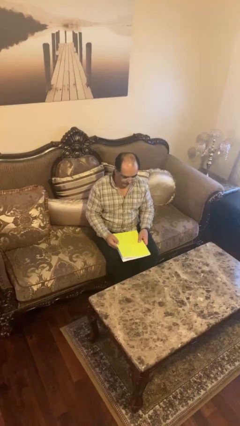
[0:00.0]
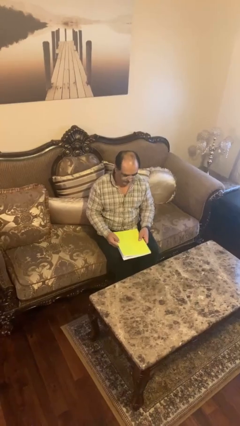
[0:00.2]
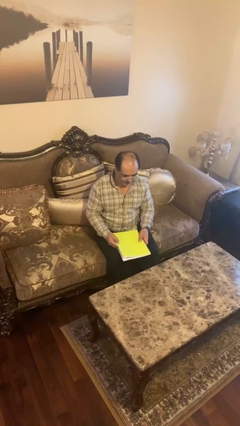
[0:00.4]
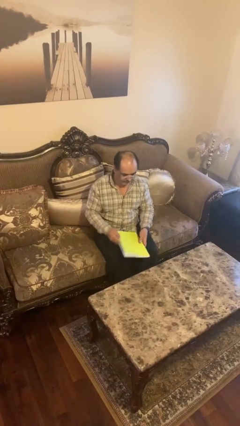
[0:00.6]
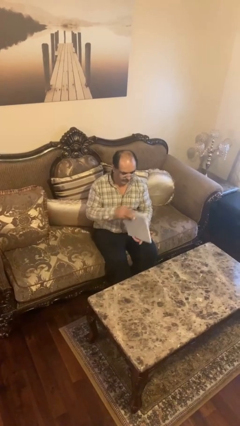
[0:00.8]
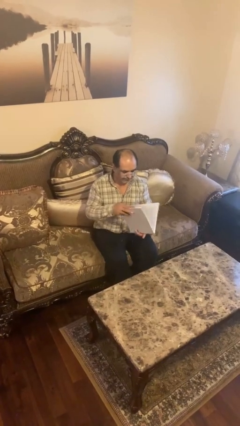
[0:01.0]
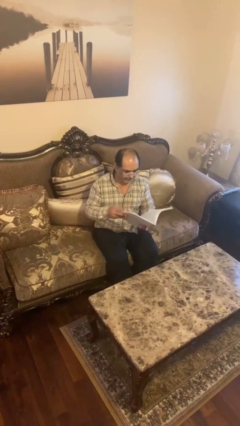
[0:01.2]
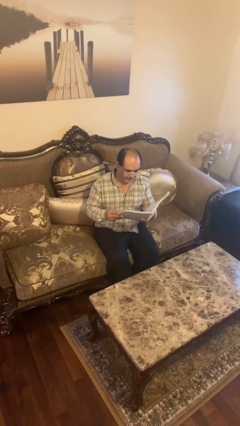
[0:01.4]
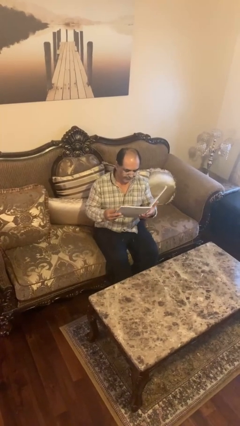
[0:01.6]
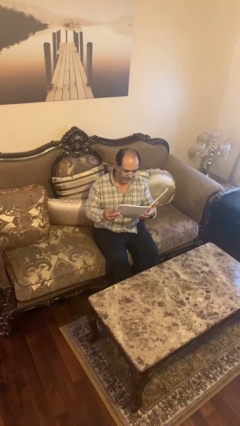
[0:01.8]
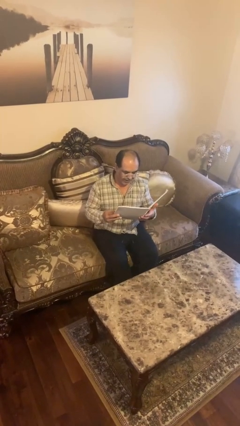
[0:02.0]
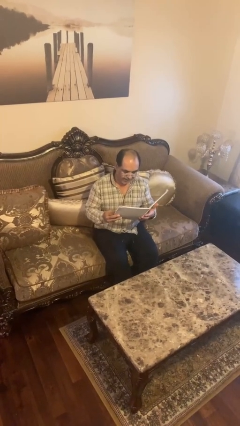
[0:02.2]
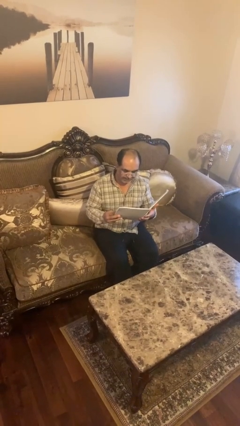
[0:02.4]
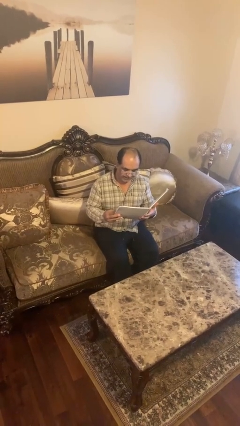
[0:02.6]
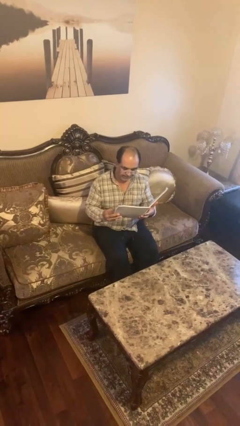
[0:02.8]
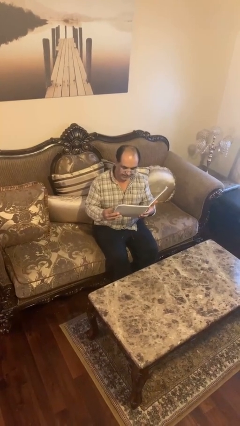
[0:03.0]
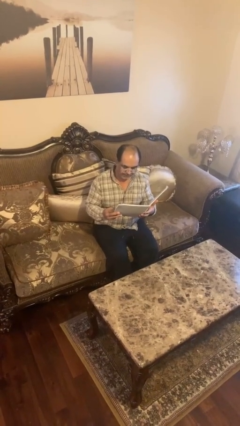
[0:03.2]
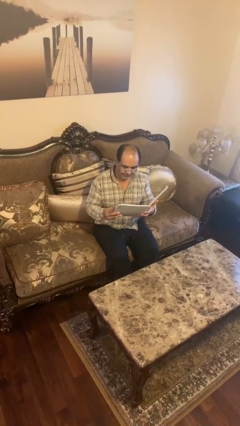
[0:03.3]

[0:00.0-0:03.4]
person reads document

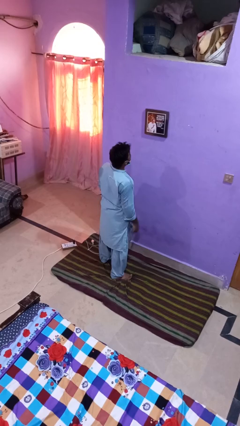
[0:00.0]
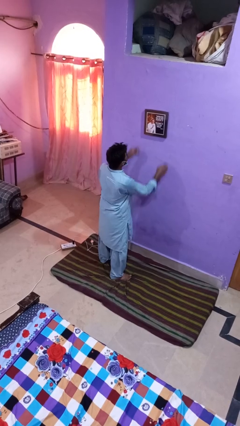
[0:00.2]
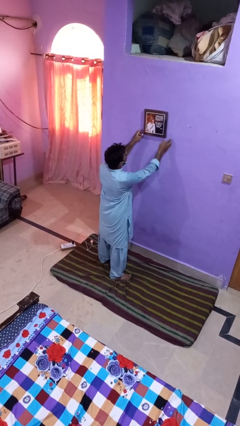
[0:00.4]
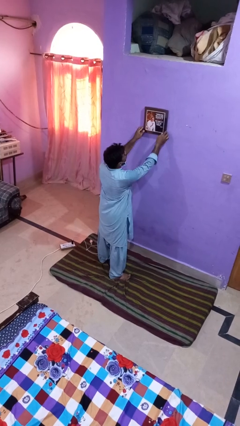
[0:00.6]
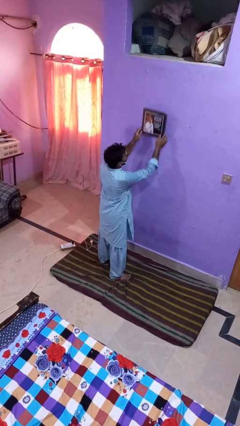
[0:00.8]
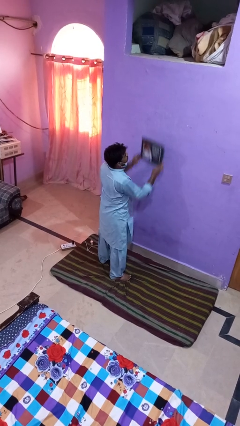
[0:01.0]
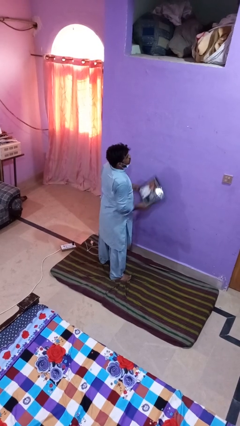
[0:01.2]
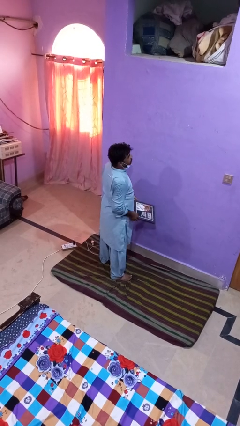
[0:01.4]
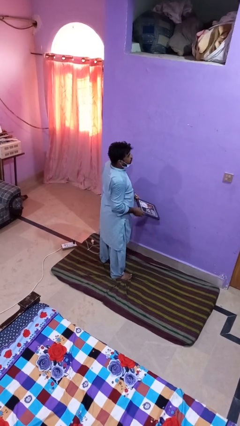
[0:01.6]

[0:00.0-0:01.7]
person takes down picture frame

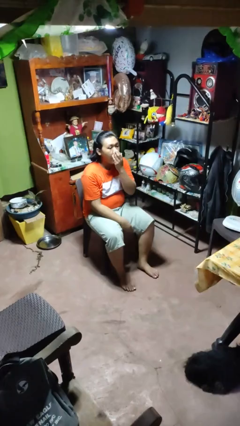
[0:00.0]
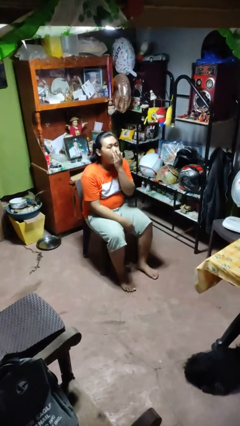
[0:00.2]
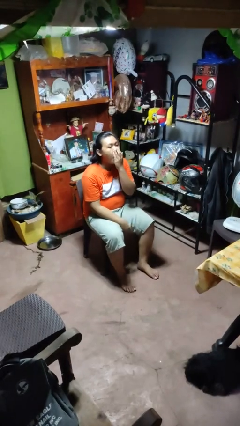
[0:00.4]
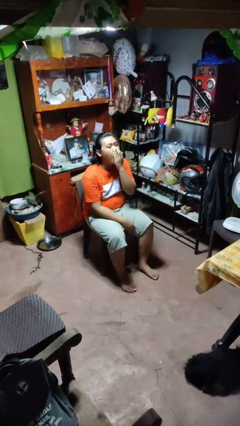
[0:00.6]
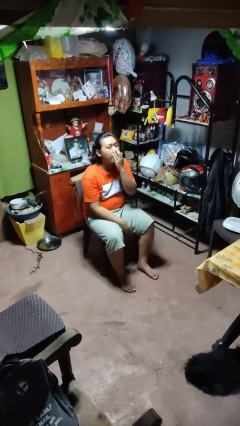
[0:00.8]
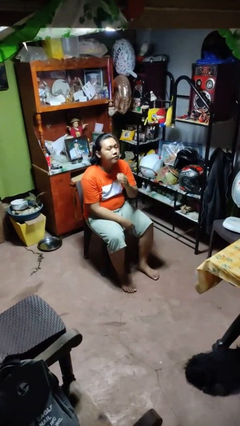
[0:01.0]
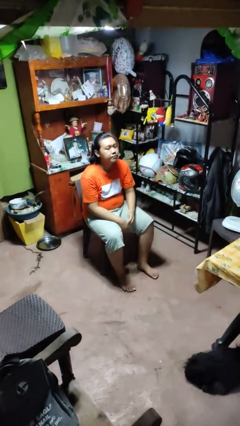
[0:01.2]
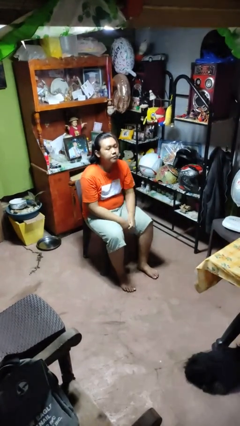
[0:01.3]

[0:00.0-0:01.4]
person yawns

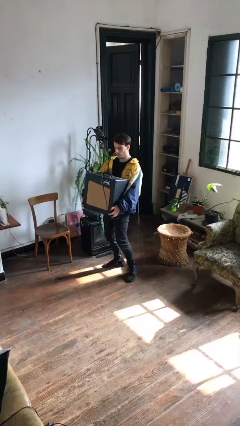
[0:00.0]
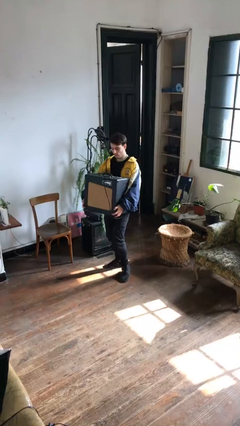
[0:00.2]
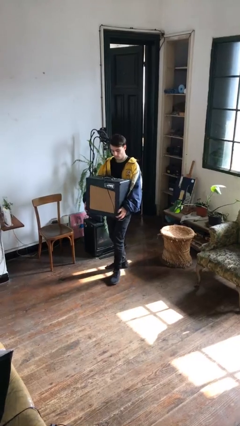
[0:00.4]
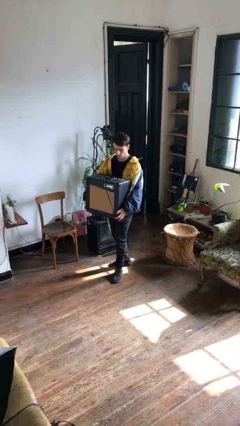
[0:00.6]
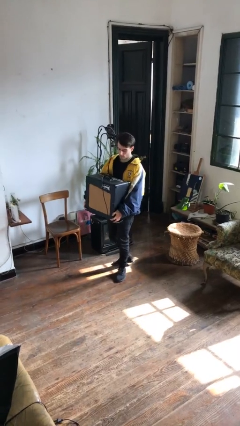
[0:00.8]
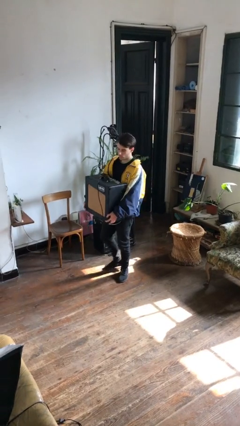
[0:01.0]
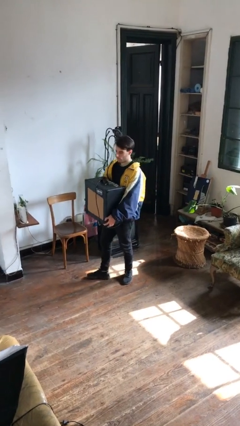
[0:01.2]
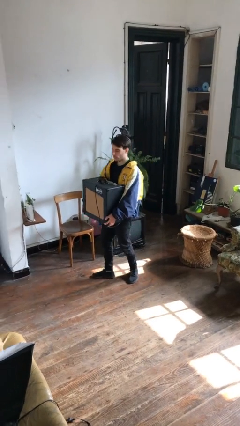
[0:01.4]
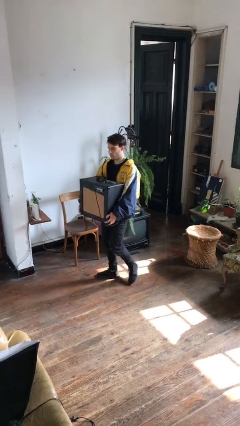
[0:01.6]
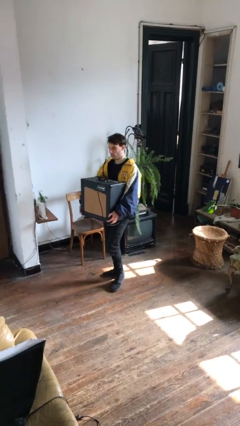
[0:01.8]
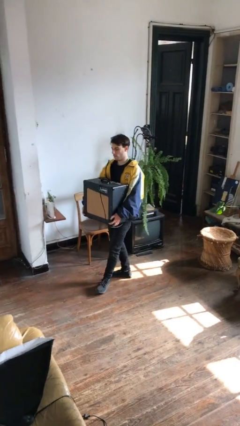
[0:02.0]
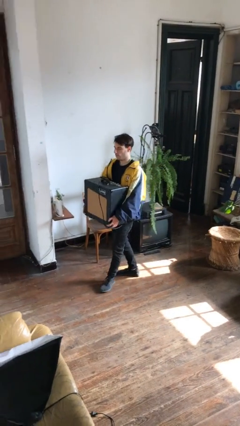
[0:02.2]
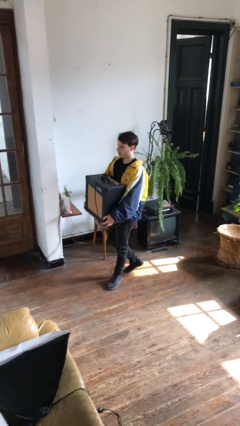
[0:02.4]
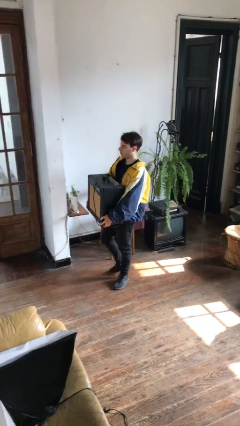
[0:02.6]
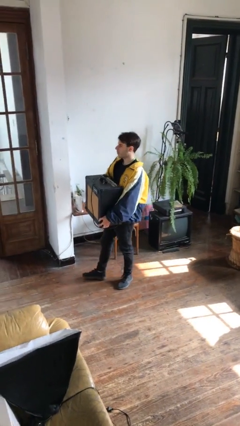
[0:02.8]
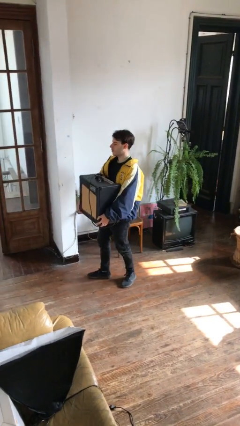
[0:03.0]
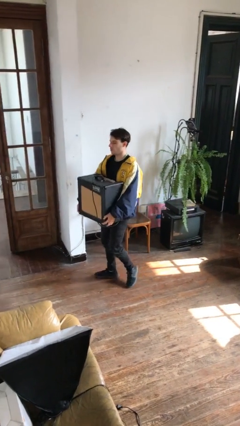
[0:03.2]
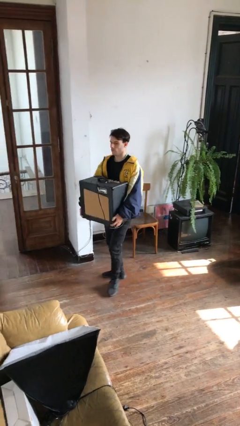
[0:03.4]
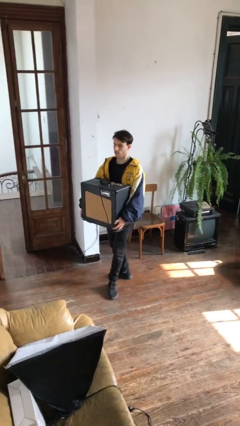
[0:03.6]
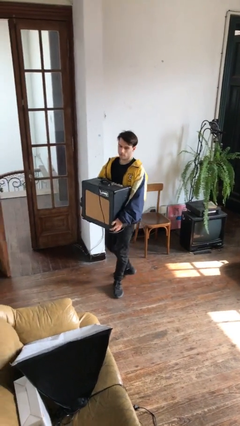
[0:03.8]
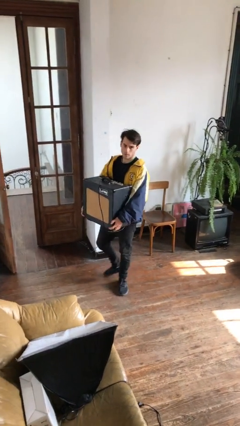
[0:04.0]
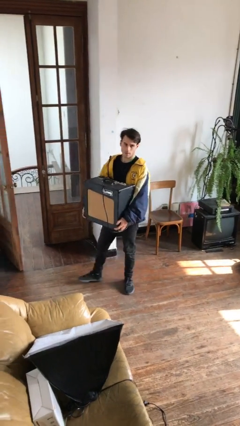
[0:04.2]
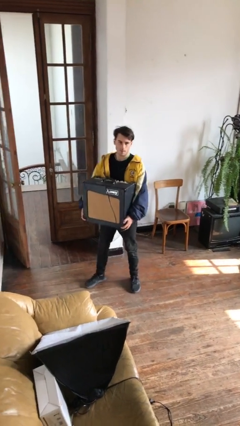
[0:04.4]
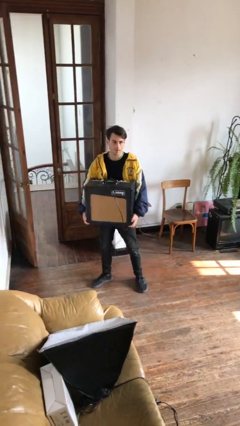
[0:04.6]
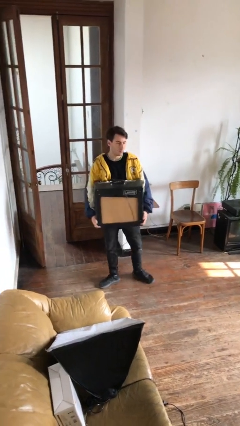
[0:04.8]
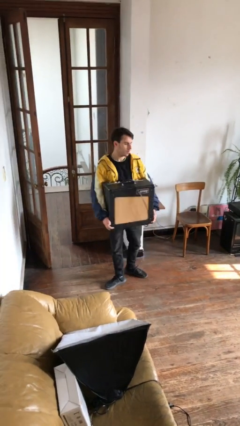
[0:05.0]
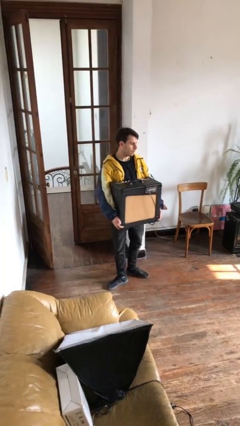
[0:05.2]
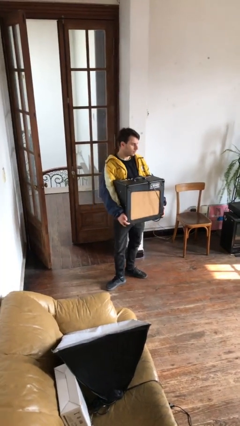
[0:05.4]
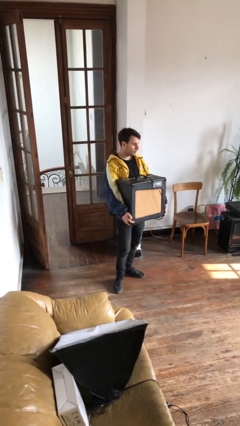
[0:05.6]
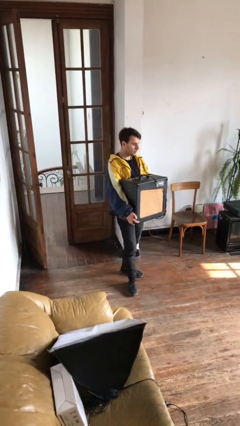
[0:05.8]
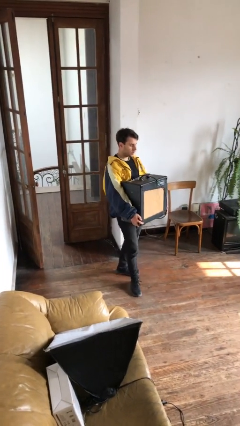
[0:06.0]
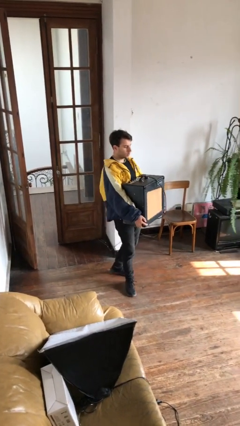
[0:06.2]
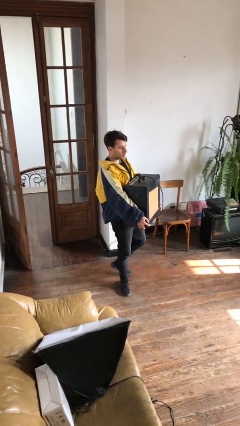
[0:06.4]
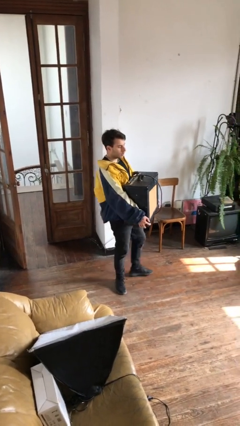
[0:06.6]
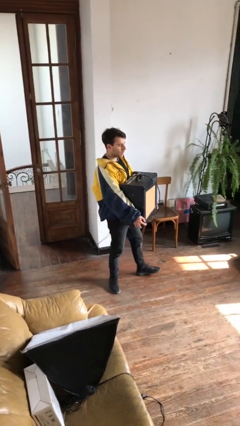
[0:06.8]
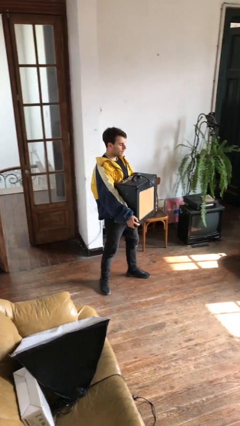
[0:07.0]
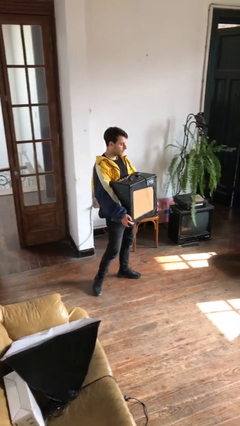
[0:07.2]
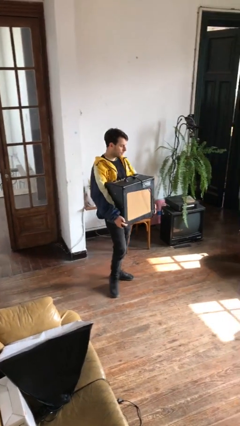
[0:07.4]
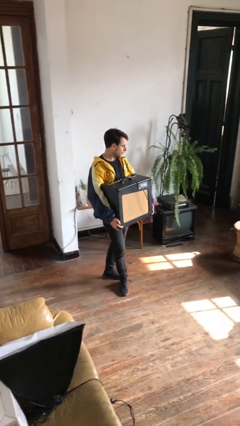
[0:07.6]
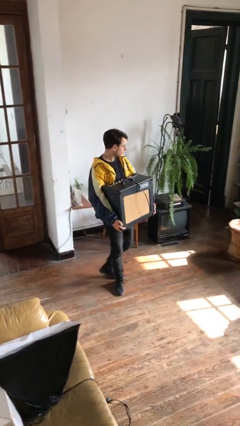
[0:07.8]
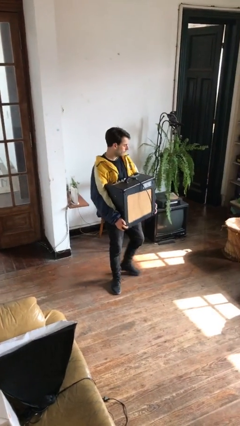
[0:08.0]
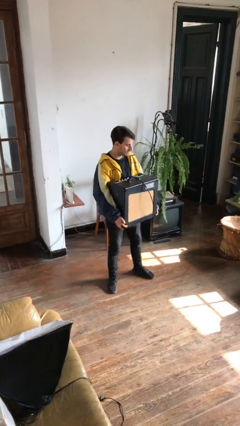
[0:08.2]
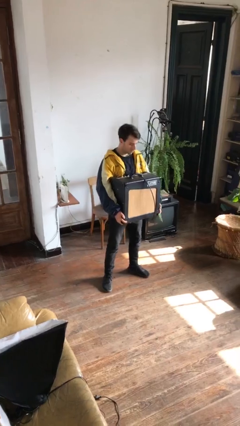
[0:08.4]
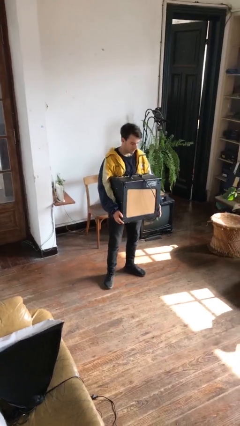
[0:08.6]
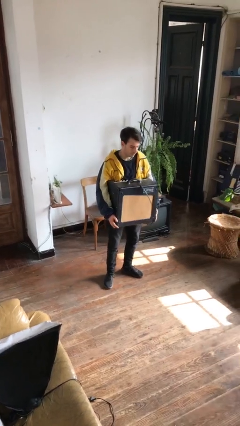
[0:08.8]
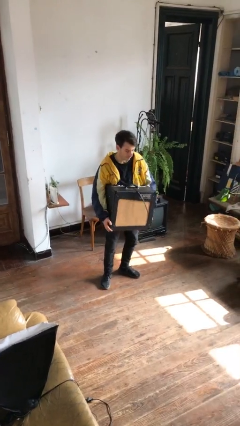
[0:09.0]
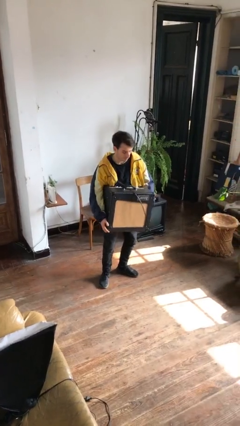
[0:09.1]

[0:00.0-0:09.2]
person carries heavy object

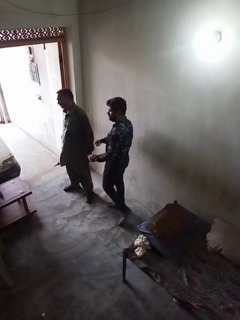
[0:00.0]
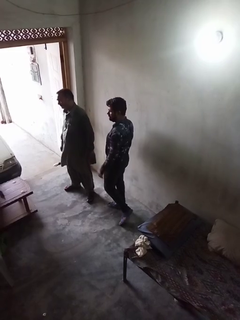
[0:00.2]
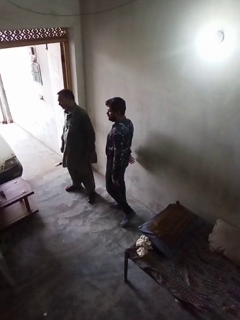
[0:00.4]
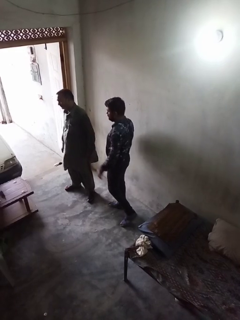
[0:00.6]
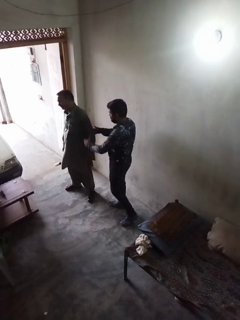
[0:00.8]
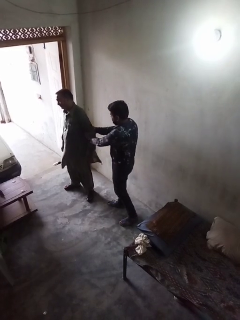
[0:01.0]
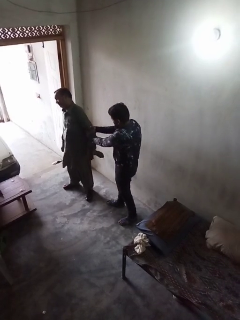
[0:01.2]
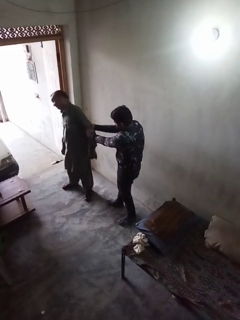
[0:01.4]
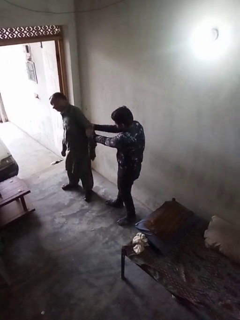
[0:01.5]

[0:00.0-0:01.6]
person grabs person by forearm

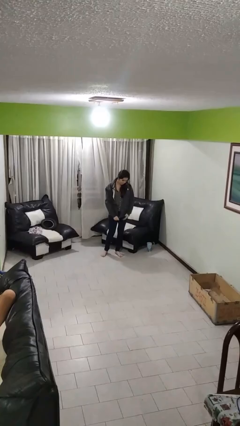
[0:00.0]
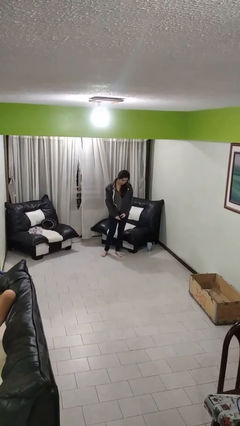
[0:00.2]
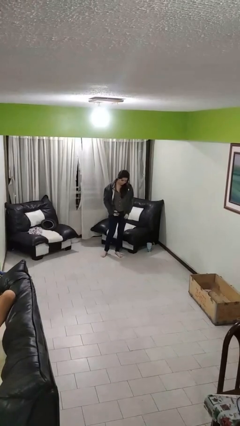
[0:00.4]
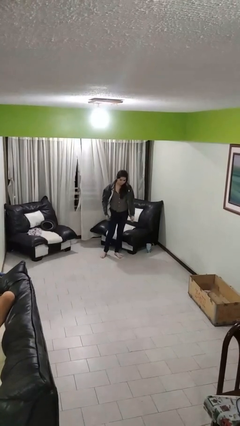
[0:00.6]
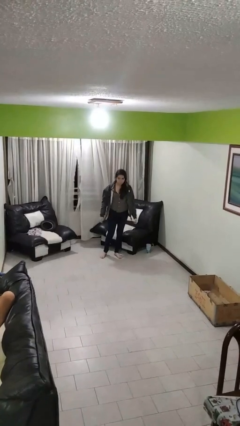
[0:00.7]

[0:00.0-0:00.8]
person unzips jacket
